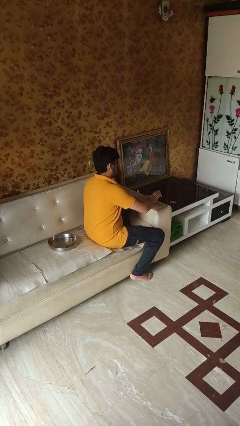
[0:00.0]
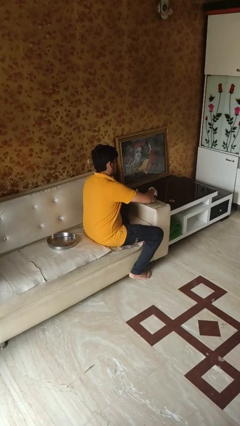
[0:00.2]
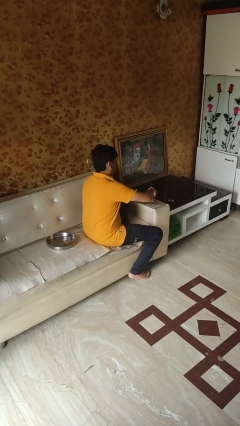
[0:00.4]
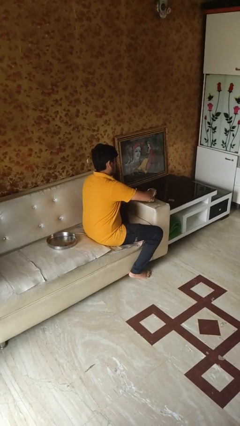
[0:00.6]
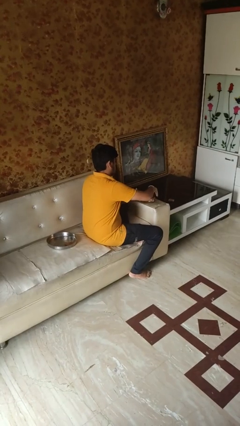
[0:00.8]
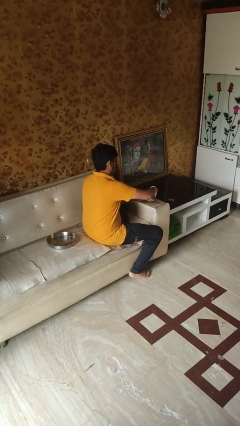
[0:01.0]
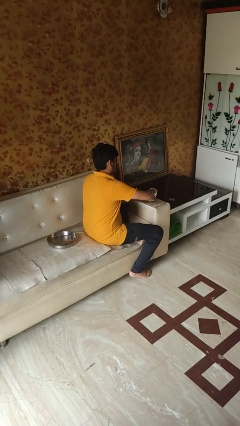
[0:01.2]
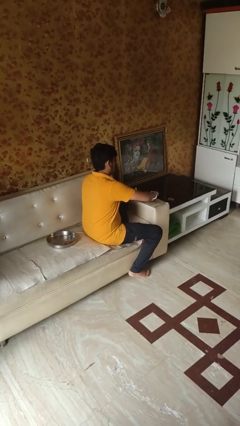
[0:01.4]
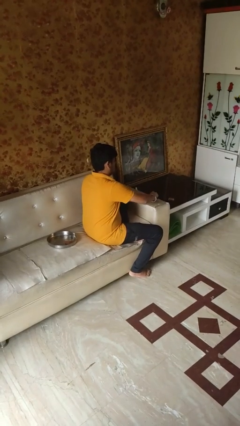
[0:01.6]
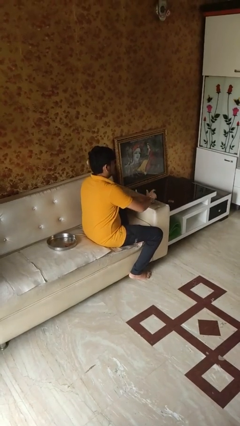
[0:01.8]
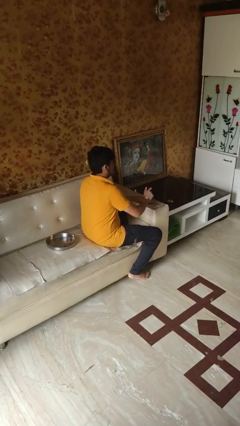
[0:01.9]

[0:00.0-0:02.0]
person closes jar

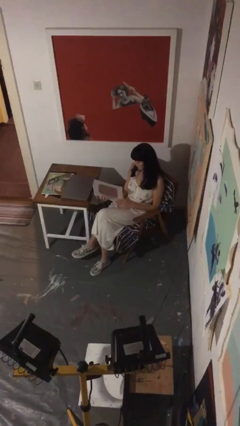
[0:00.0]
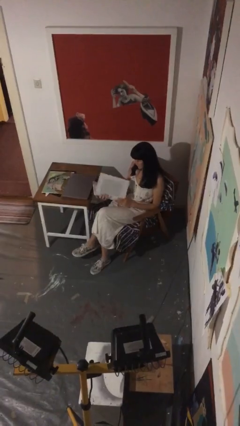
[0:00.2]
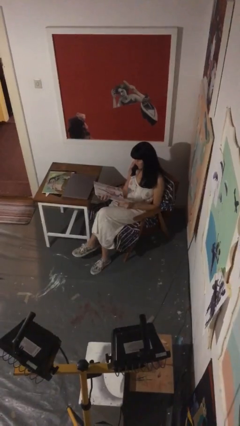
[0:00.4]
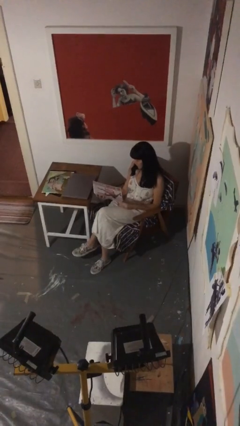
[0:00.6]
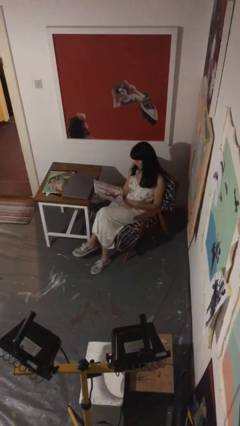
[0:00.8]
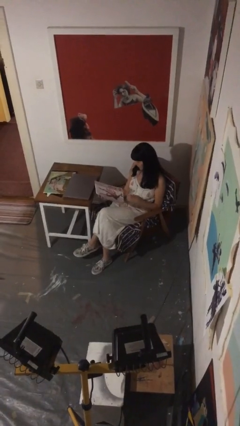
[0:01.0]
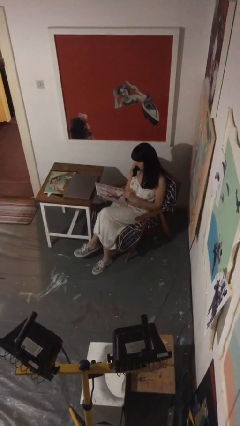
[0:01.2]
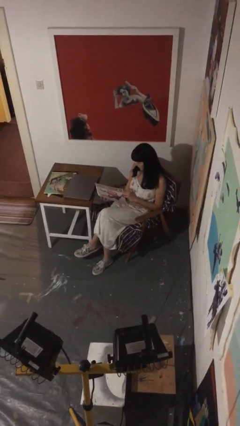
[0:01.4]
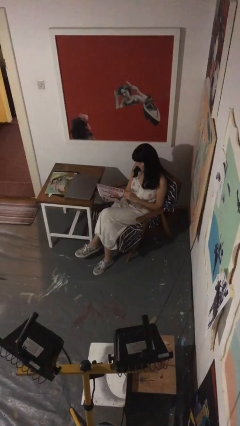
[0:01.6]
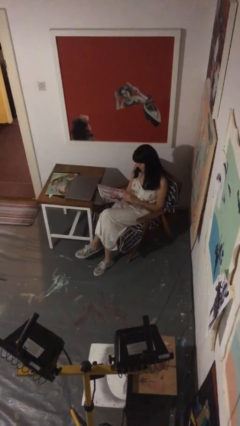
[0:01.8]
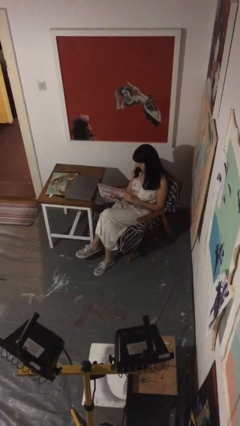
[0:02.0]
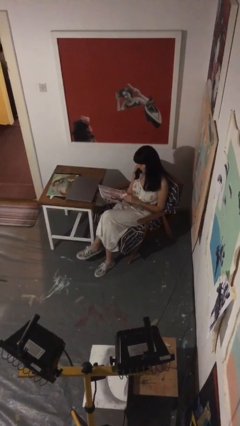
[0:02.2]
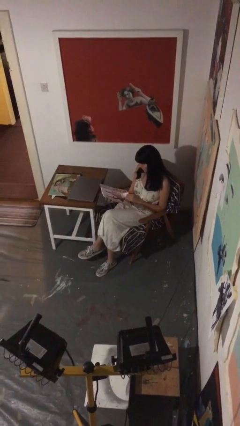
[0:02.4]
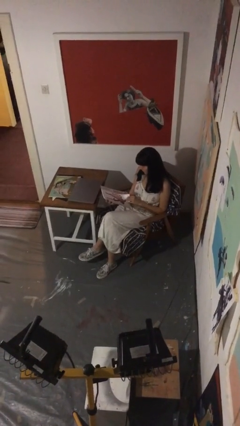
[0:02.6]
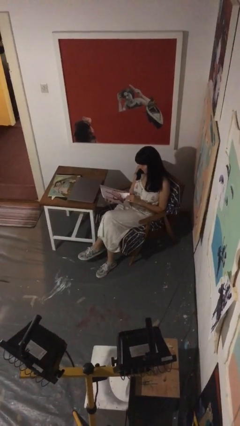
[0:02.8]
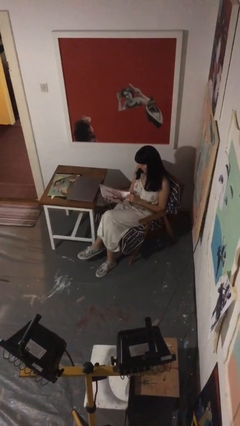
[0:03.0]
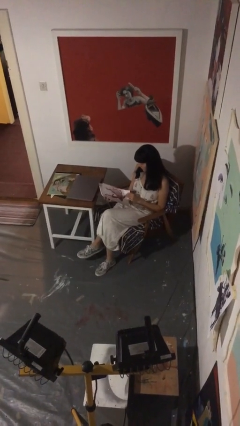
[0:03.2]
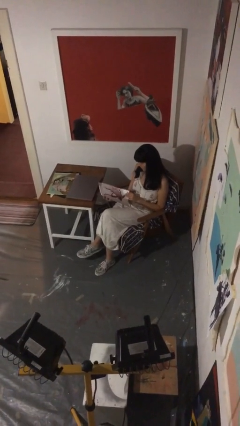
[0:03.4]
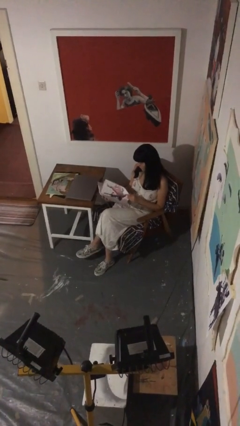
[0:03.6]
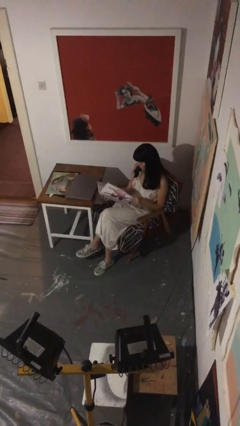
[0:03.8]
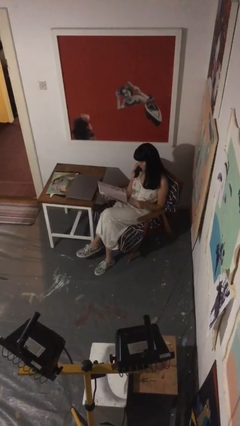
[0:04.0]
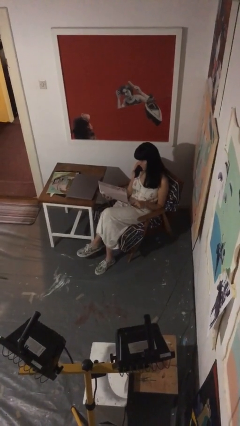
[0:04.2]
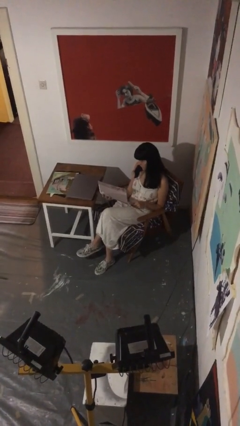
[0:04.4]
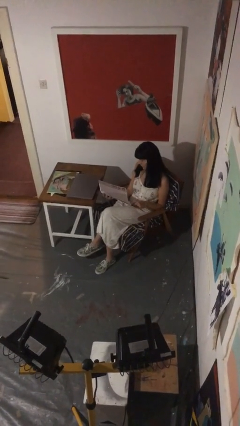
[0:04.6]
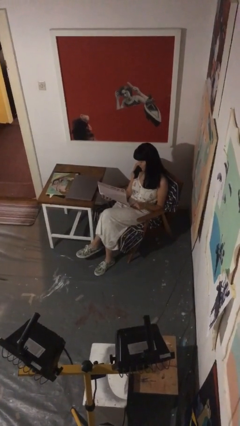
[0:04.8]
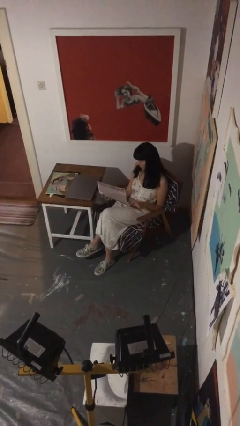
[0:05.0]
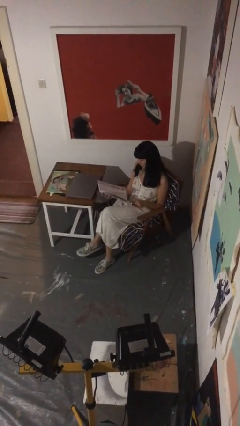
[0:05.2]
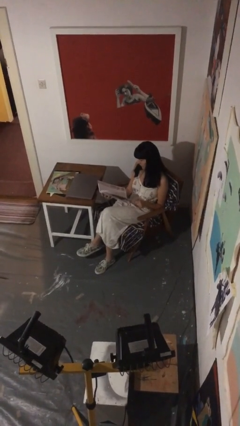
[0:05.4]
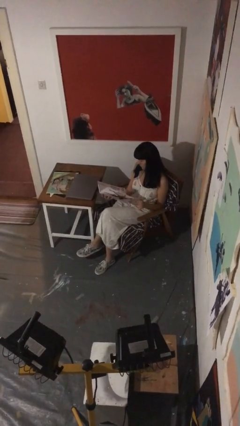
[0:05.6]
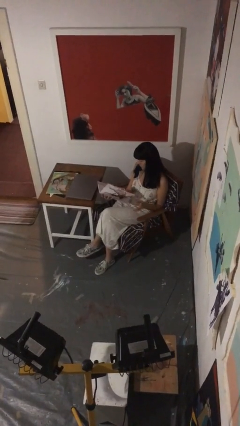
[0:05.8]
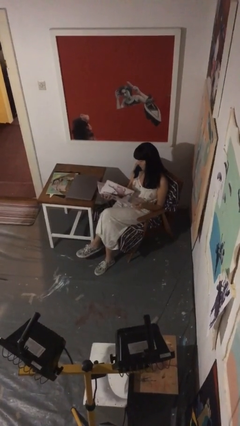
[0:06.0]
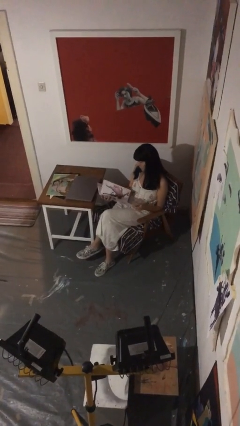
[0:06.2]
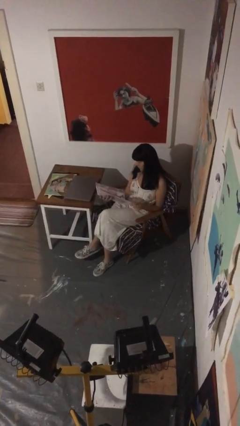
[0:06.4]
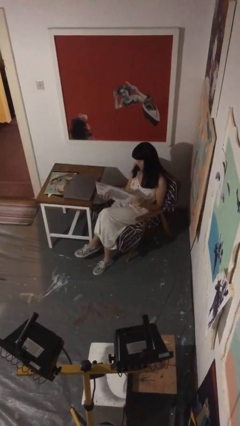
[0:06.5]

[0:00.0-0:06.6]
person reads document

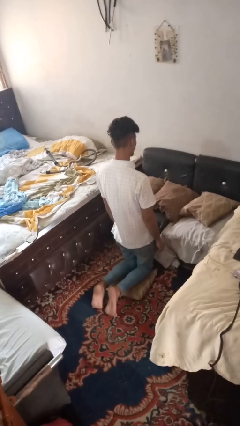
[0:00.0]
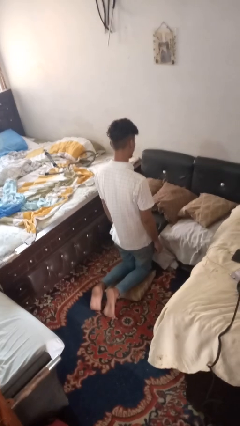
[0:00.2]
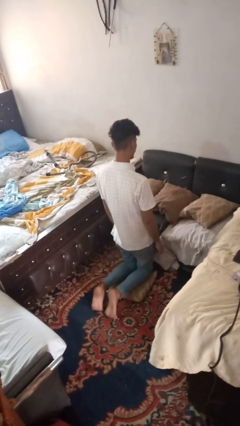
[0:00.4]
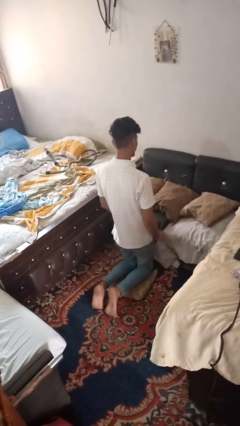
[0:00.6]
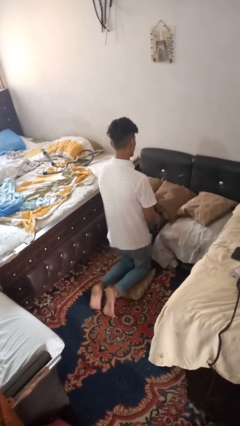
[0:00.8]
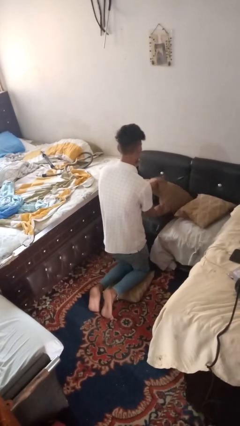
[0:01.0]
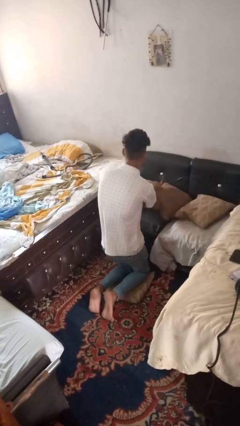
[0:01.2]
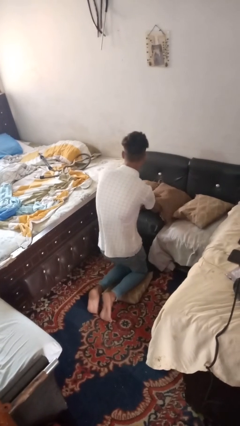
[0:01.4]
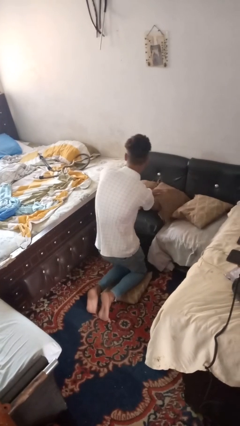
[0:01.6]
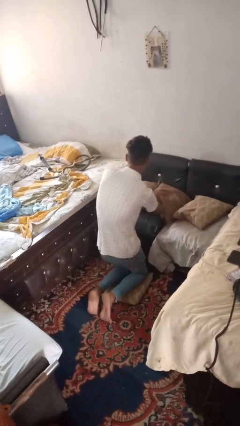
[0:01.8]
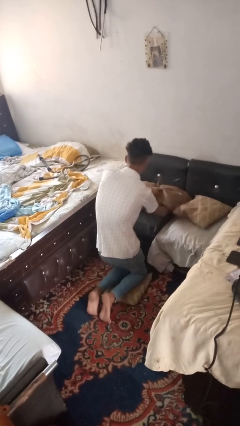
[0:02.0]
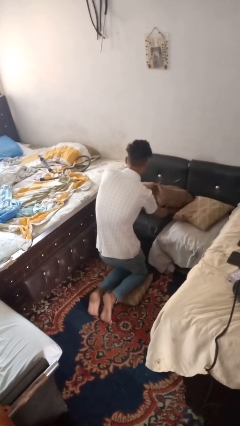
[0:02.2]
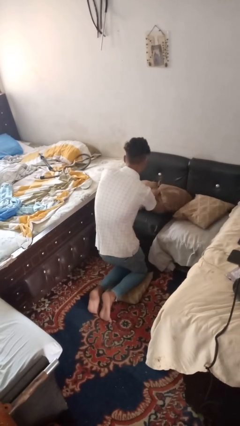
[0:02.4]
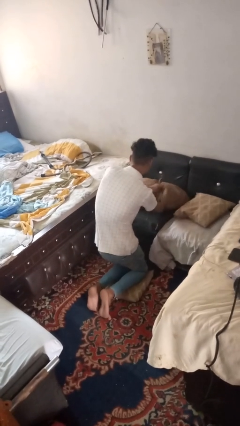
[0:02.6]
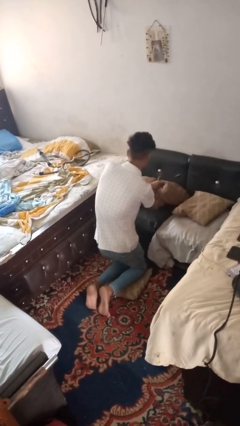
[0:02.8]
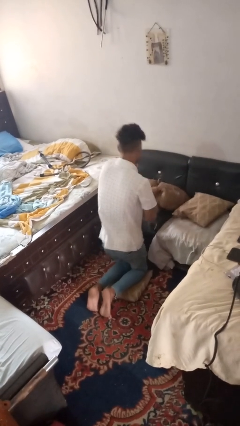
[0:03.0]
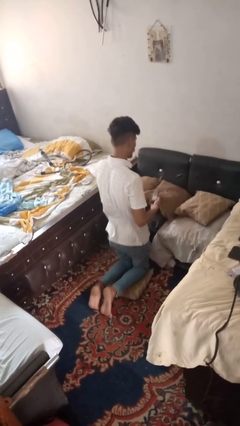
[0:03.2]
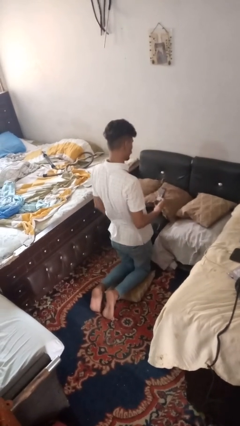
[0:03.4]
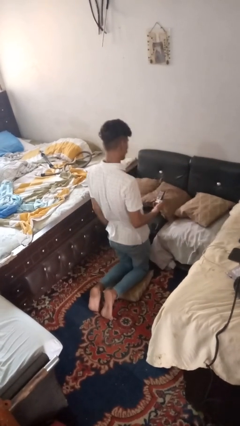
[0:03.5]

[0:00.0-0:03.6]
person searches in couch

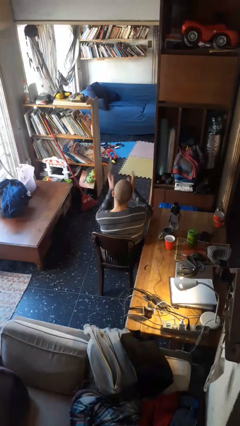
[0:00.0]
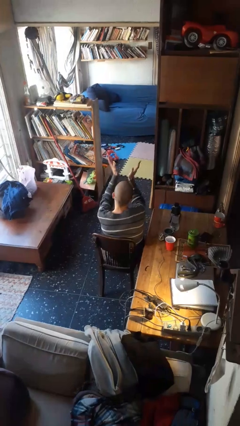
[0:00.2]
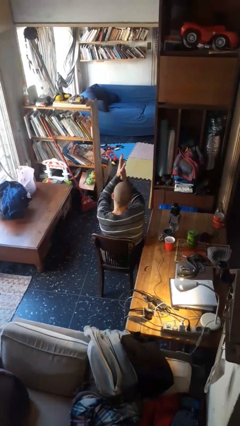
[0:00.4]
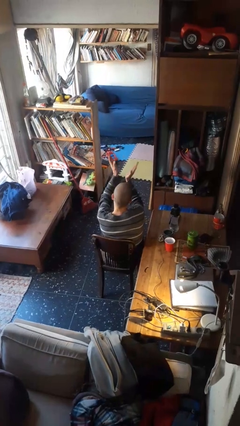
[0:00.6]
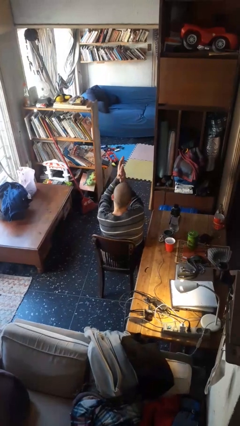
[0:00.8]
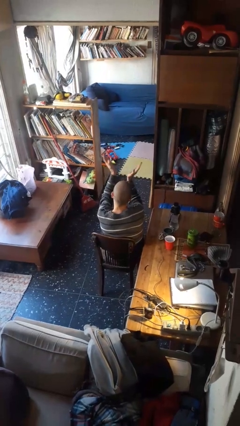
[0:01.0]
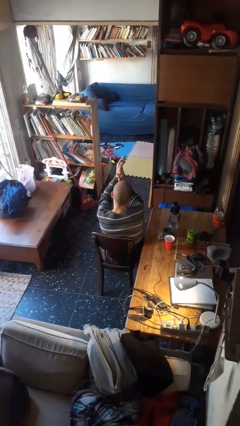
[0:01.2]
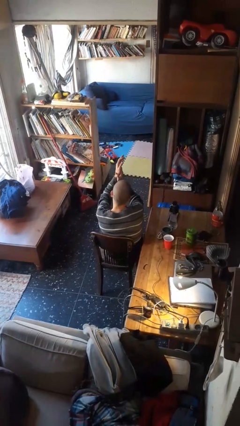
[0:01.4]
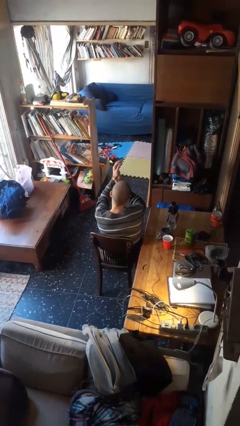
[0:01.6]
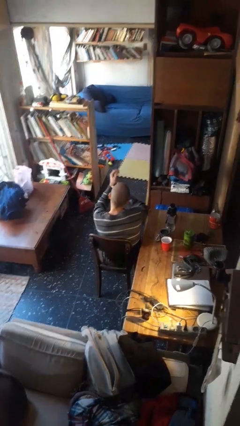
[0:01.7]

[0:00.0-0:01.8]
person claps hands

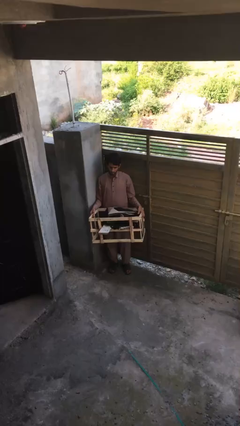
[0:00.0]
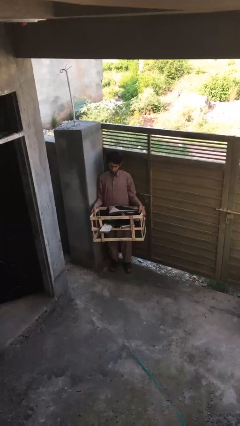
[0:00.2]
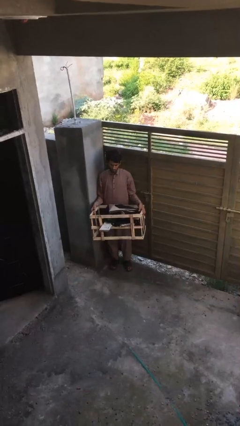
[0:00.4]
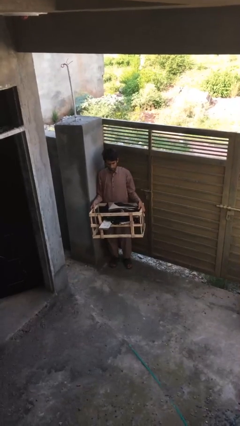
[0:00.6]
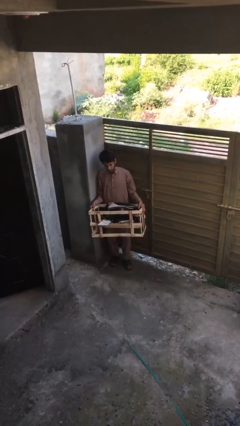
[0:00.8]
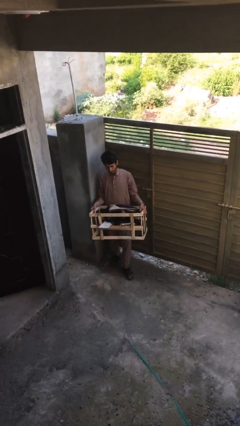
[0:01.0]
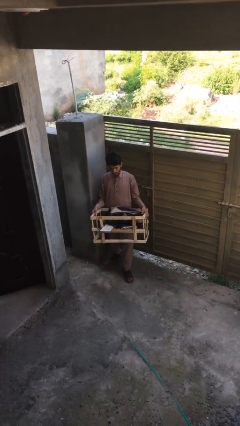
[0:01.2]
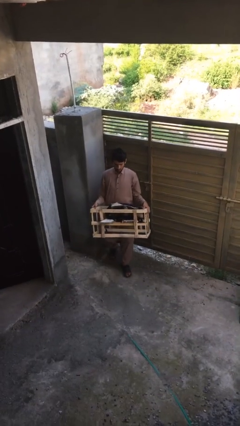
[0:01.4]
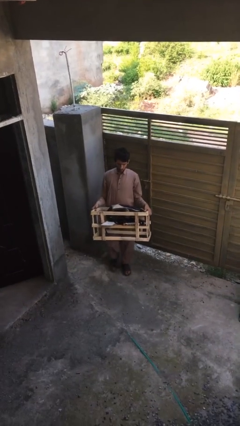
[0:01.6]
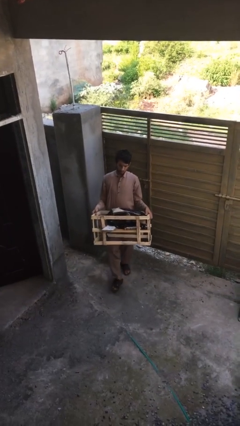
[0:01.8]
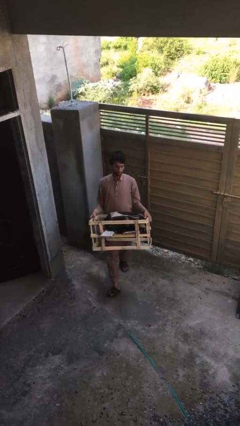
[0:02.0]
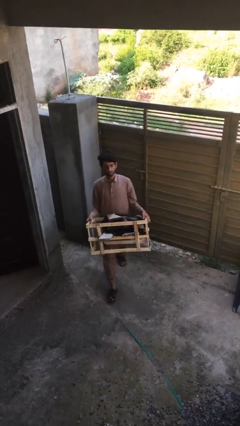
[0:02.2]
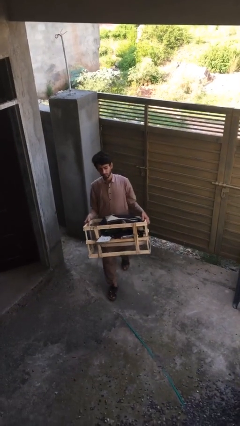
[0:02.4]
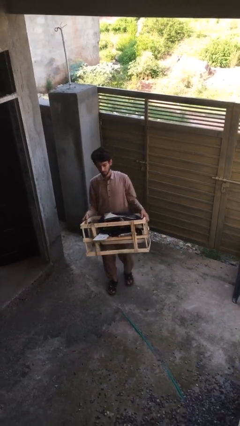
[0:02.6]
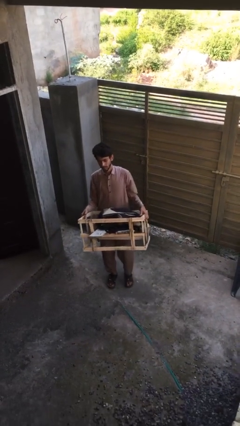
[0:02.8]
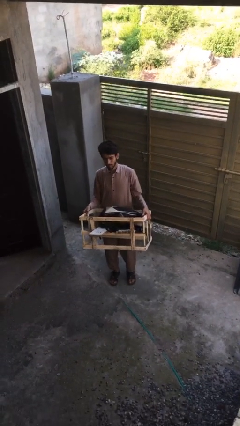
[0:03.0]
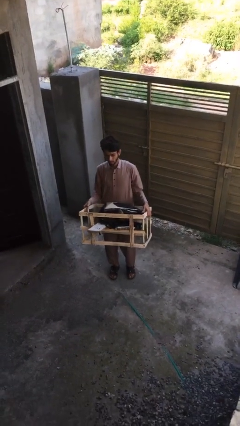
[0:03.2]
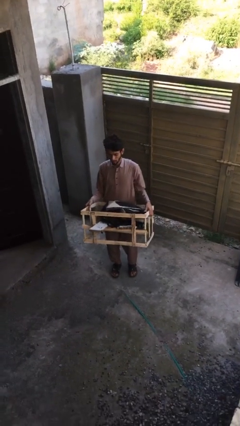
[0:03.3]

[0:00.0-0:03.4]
person carries heavy object
